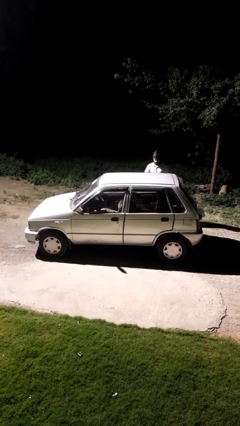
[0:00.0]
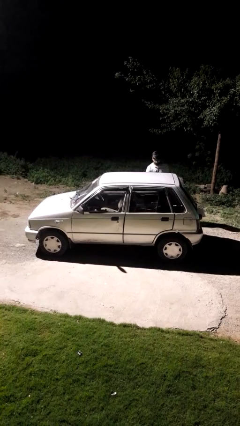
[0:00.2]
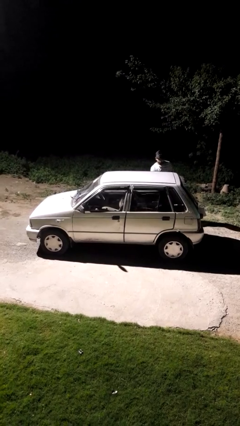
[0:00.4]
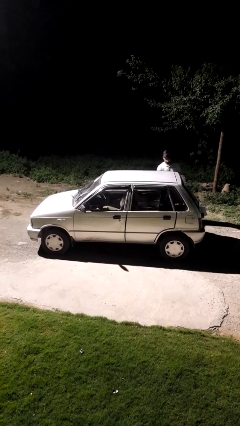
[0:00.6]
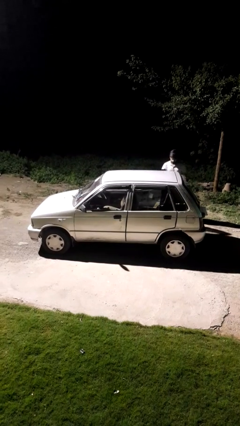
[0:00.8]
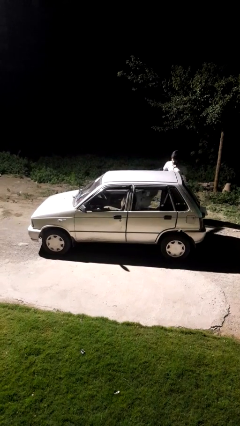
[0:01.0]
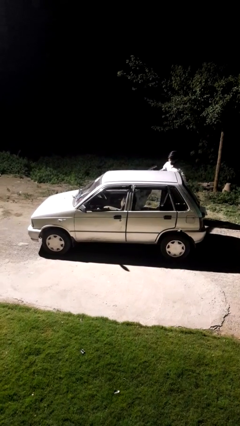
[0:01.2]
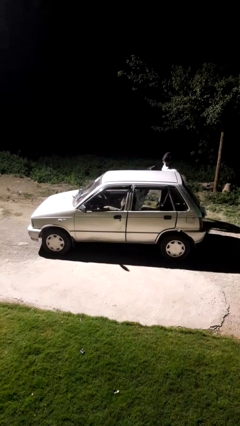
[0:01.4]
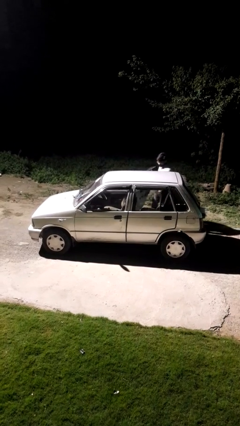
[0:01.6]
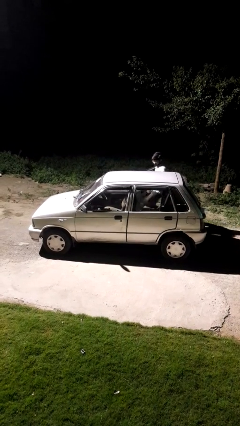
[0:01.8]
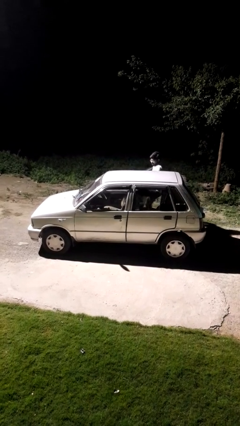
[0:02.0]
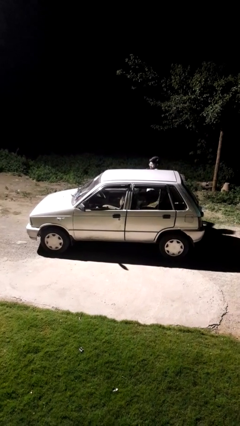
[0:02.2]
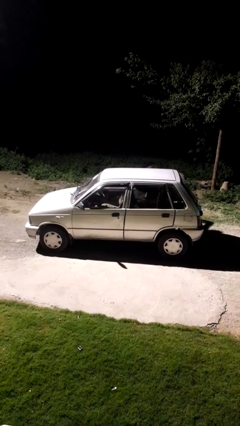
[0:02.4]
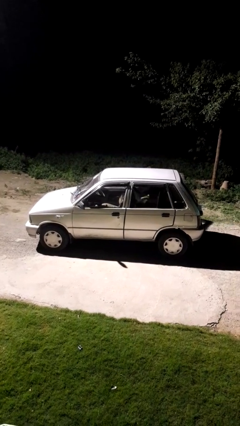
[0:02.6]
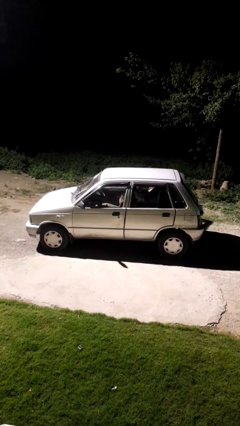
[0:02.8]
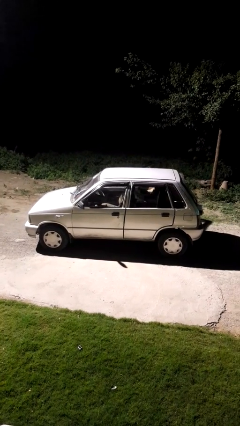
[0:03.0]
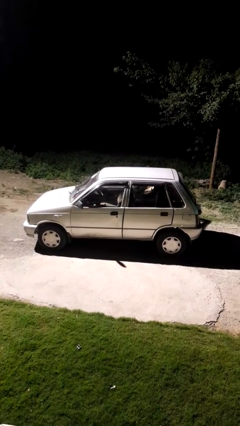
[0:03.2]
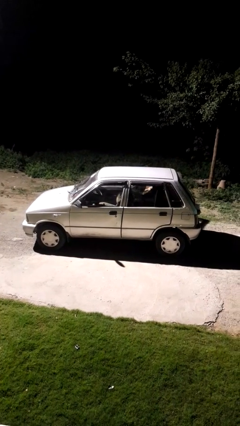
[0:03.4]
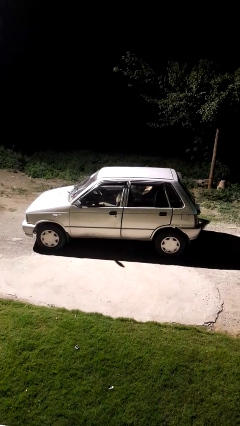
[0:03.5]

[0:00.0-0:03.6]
car picks up person

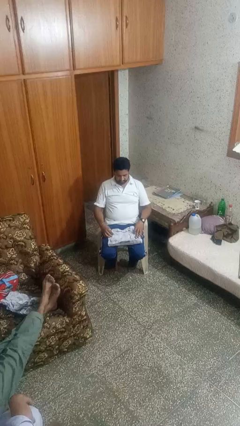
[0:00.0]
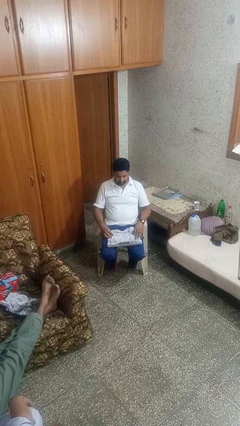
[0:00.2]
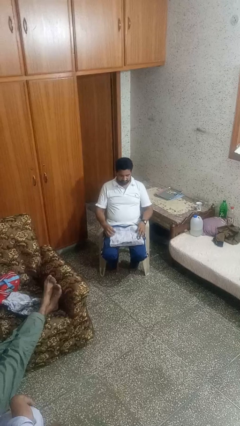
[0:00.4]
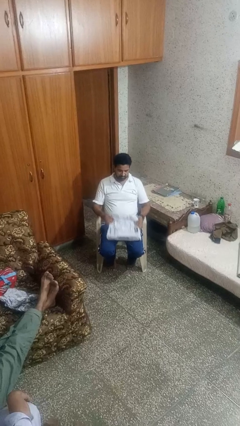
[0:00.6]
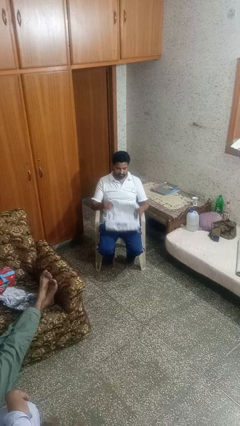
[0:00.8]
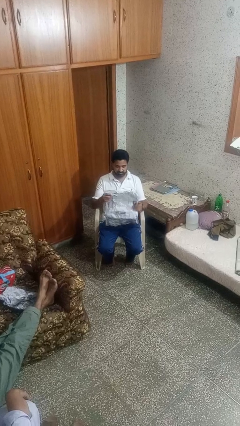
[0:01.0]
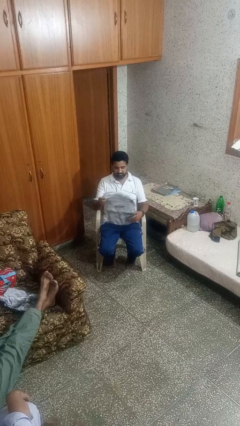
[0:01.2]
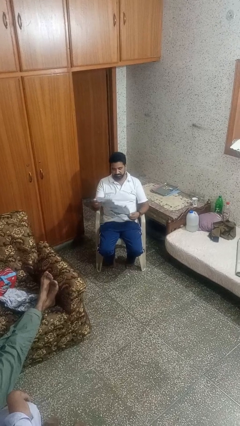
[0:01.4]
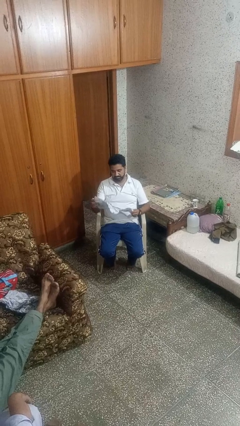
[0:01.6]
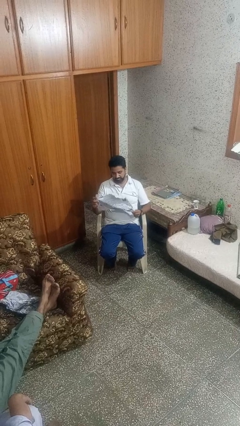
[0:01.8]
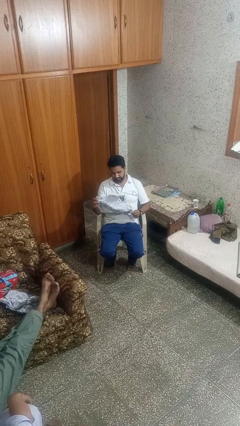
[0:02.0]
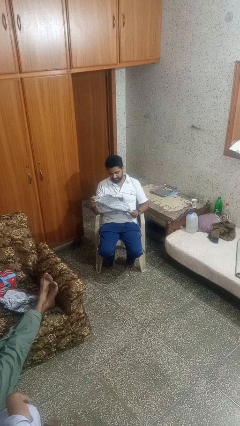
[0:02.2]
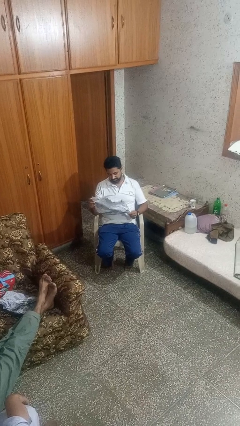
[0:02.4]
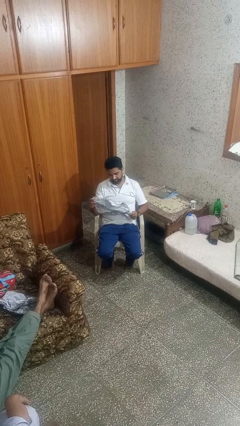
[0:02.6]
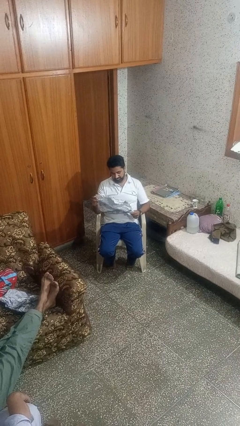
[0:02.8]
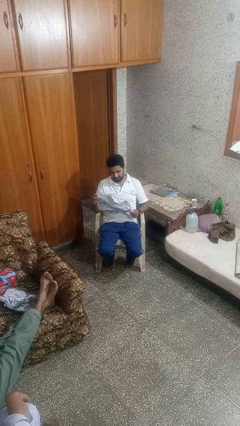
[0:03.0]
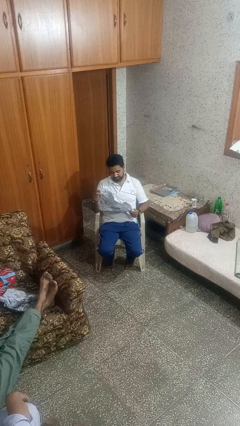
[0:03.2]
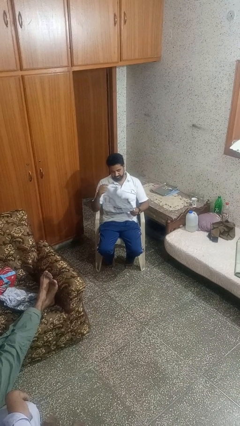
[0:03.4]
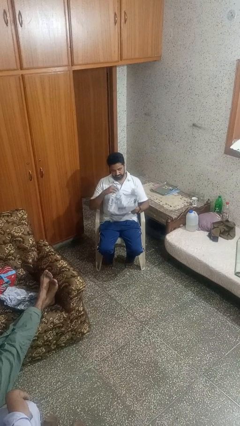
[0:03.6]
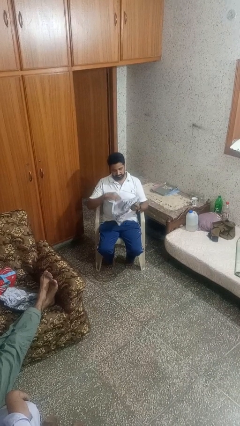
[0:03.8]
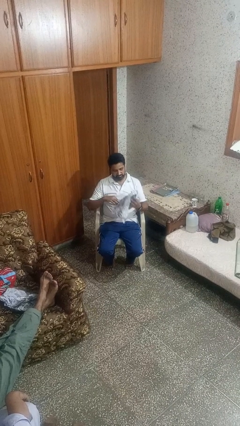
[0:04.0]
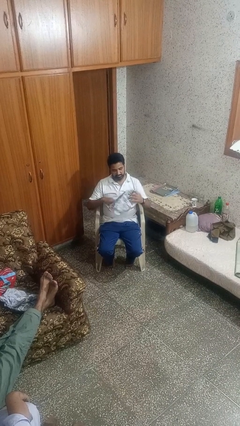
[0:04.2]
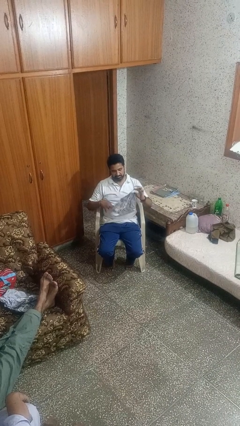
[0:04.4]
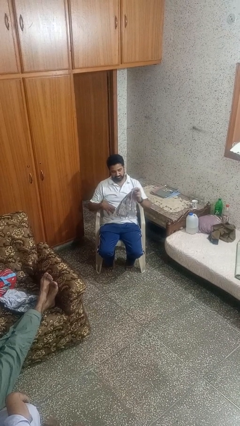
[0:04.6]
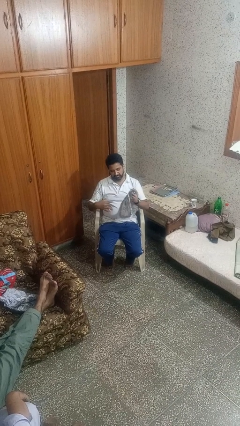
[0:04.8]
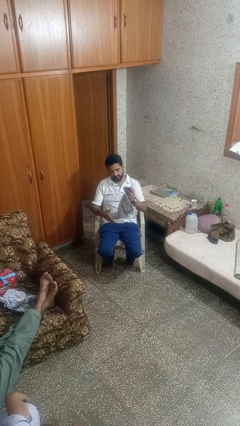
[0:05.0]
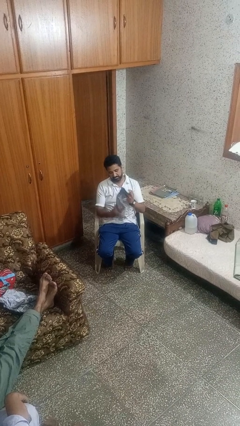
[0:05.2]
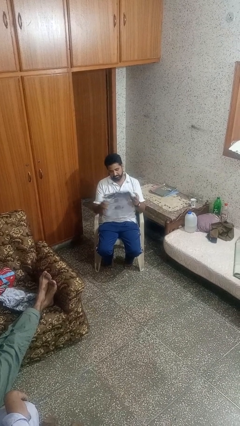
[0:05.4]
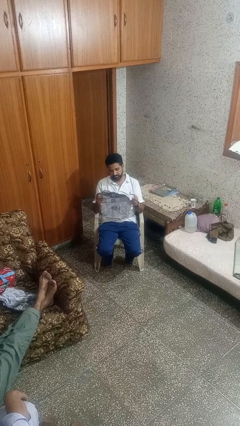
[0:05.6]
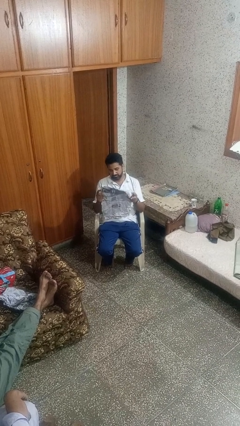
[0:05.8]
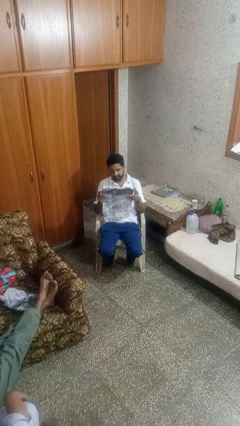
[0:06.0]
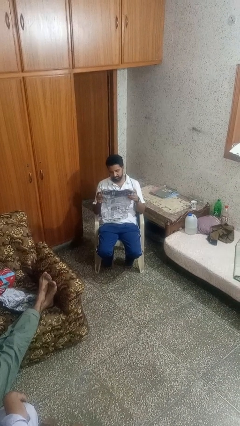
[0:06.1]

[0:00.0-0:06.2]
person reads newspaper

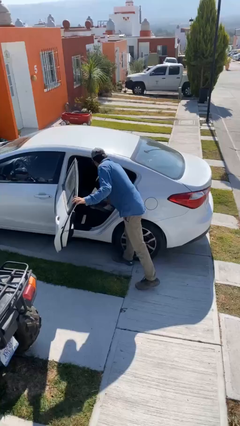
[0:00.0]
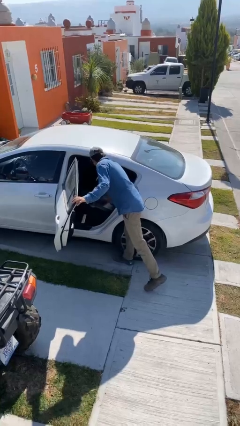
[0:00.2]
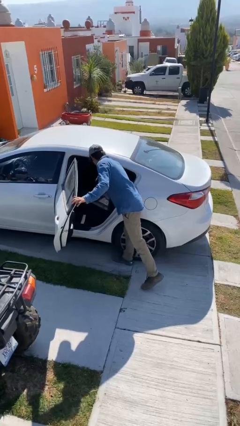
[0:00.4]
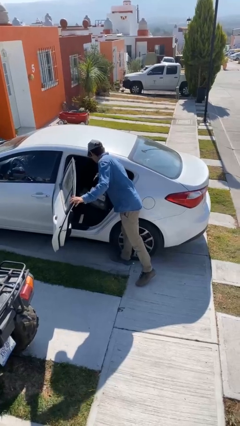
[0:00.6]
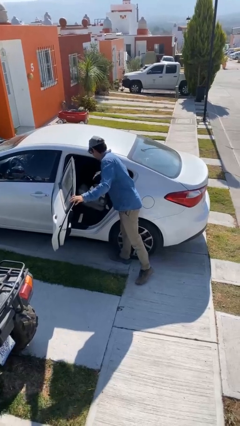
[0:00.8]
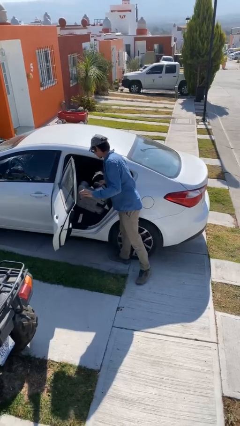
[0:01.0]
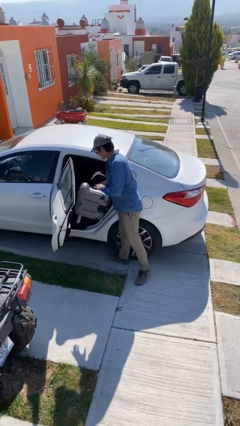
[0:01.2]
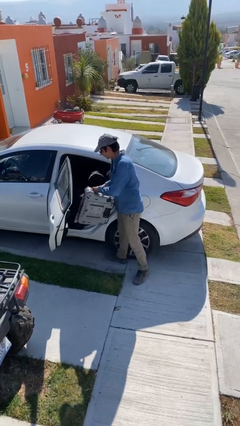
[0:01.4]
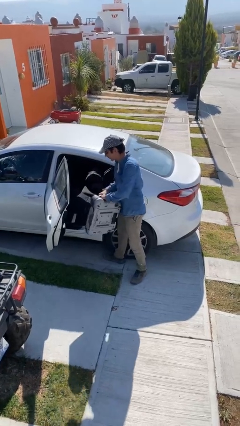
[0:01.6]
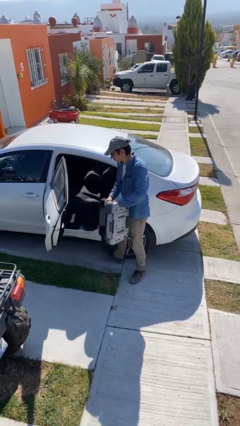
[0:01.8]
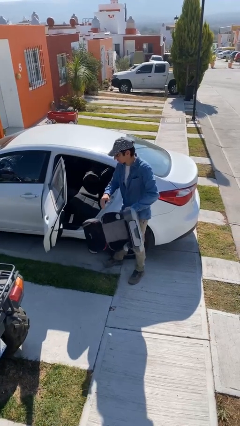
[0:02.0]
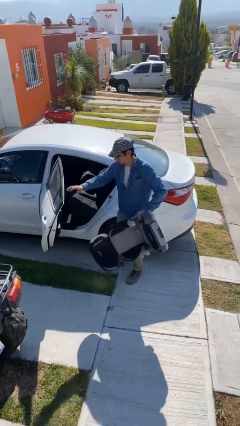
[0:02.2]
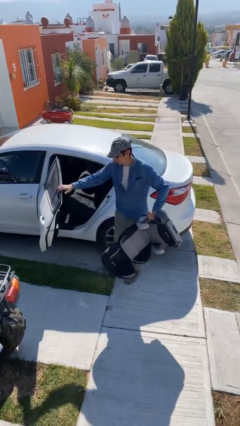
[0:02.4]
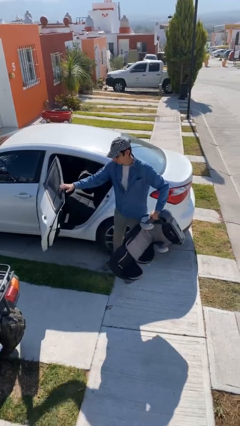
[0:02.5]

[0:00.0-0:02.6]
person unloads car

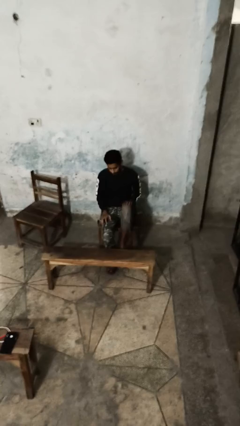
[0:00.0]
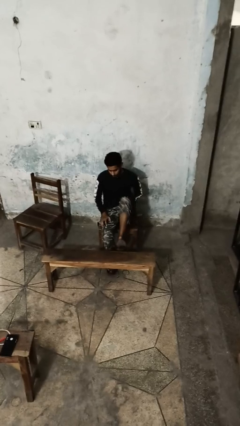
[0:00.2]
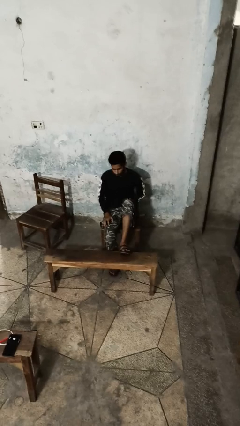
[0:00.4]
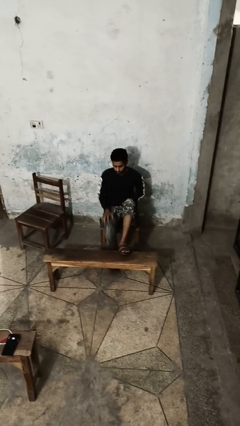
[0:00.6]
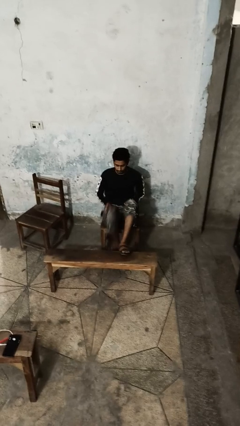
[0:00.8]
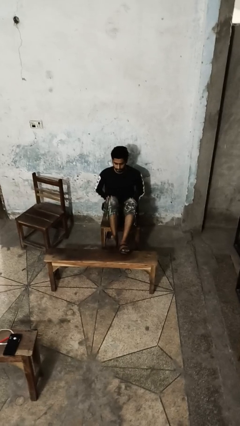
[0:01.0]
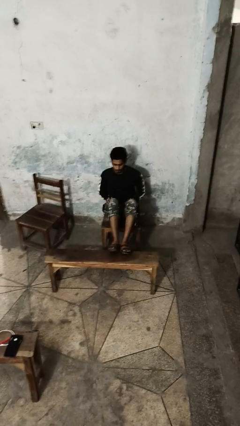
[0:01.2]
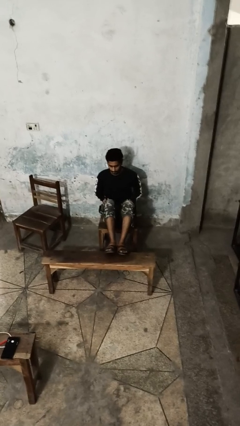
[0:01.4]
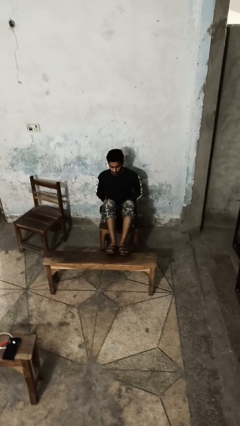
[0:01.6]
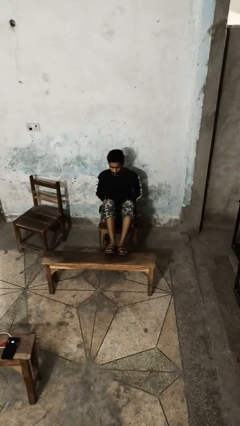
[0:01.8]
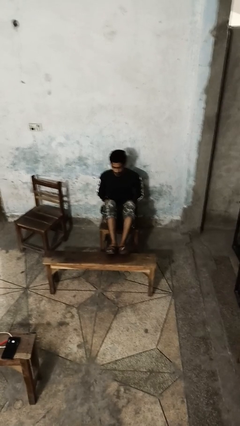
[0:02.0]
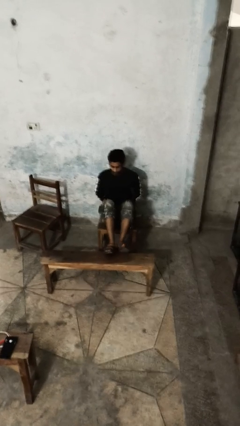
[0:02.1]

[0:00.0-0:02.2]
person puts feet up

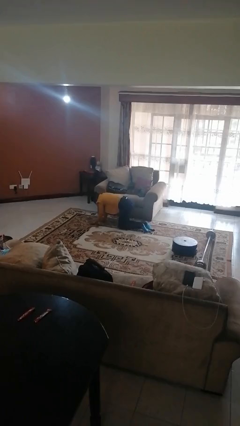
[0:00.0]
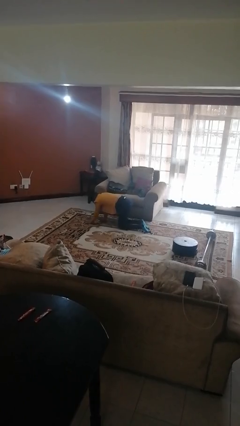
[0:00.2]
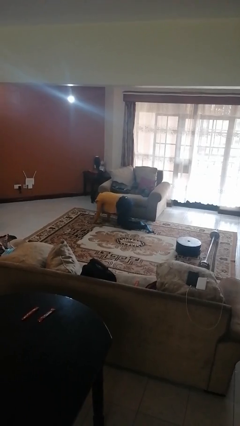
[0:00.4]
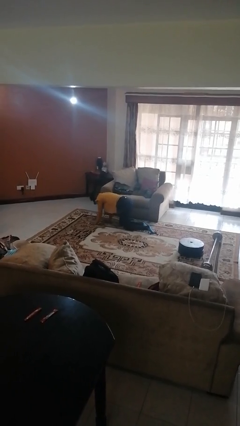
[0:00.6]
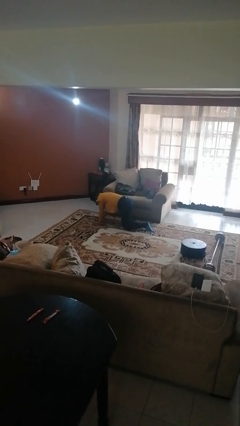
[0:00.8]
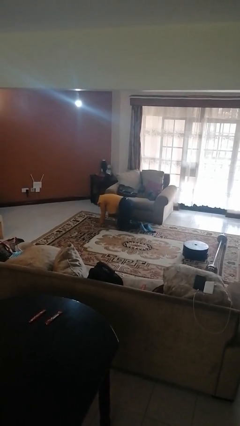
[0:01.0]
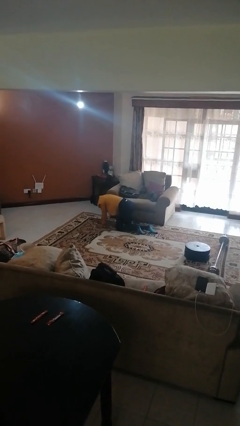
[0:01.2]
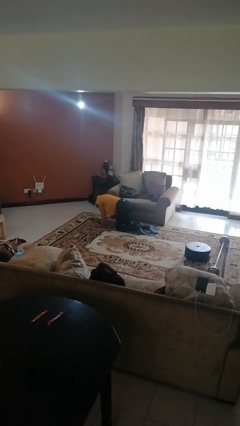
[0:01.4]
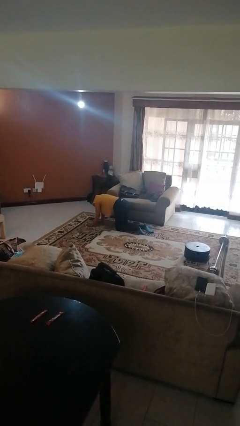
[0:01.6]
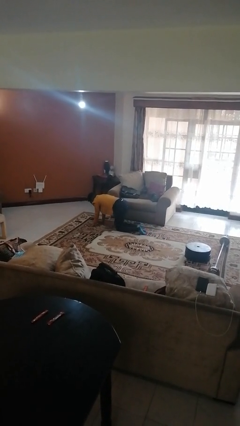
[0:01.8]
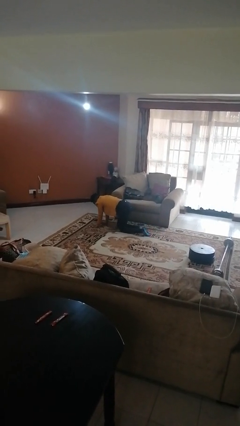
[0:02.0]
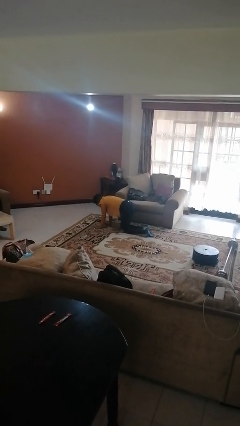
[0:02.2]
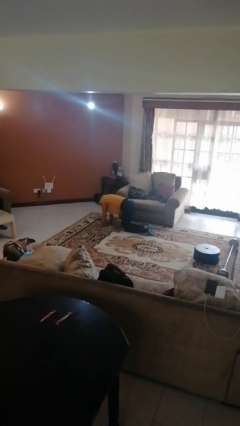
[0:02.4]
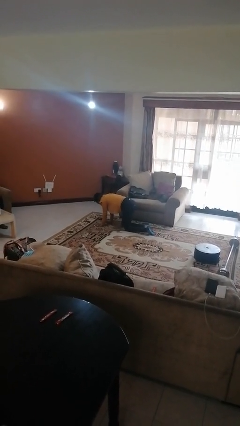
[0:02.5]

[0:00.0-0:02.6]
person crawls

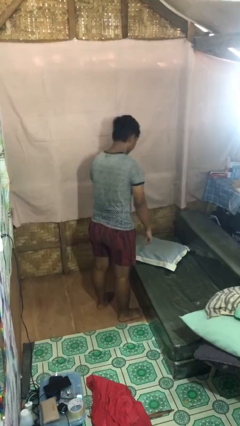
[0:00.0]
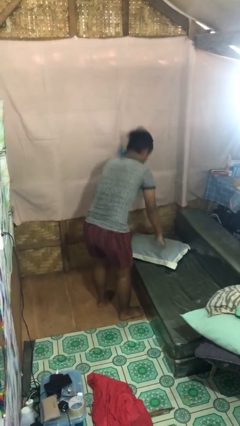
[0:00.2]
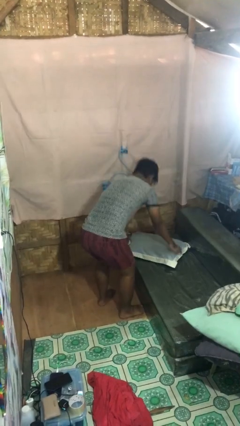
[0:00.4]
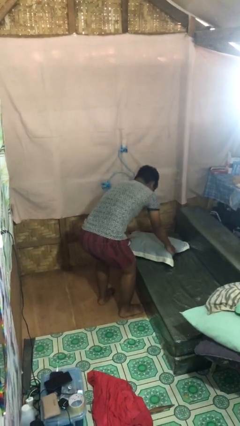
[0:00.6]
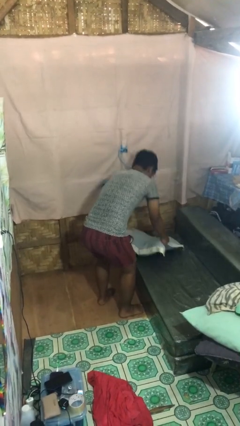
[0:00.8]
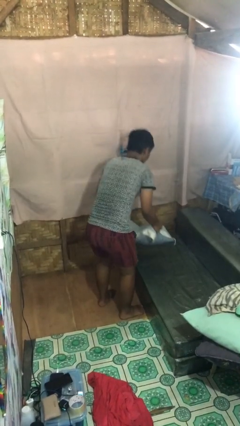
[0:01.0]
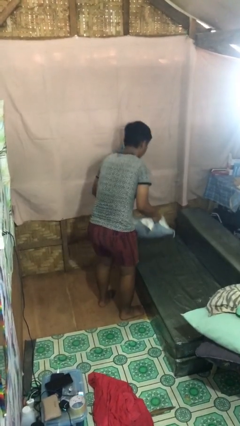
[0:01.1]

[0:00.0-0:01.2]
person picks up object from couch
